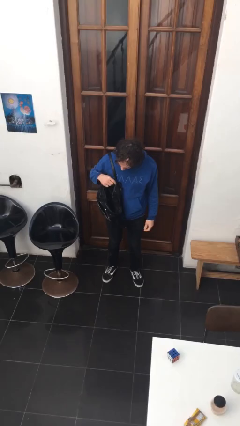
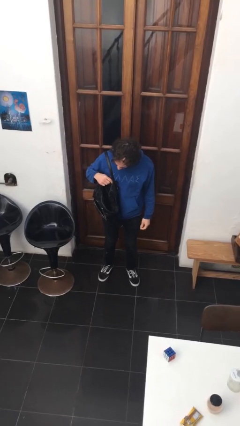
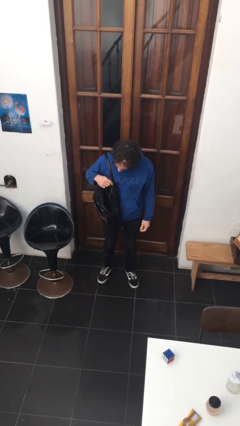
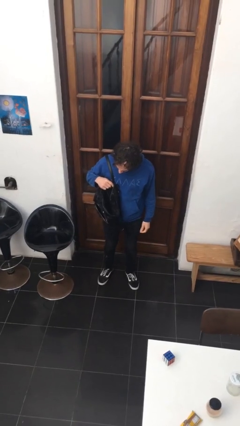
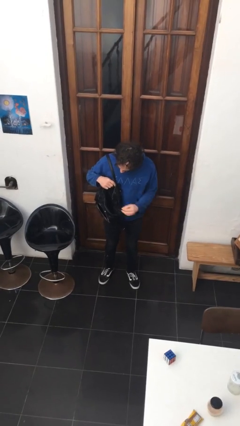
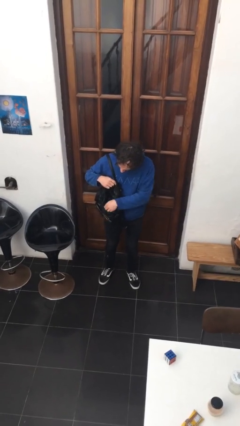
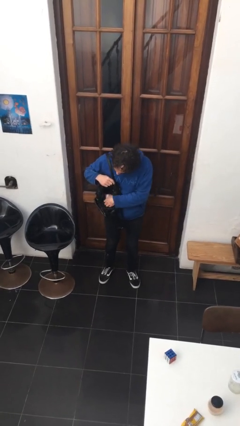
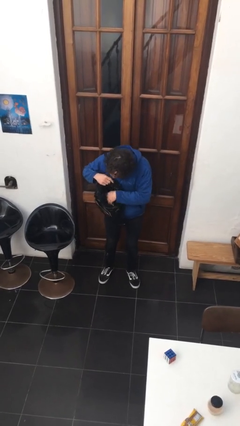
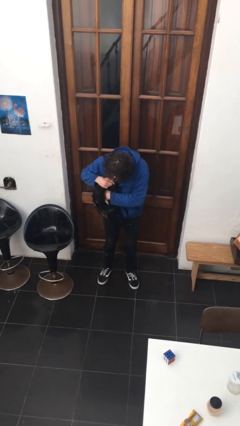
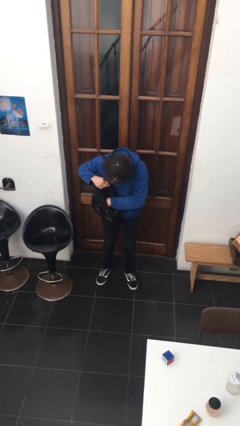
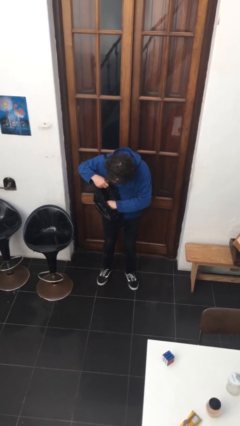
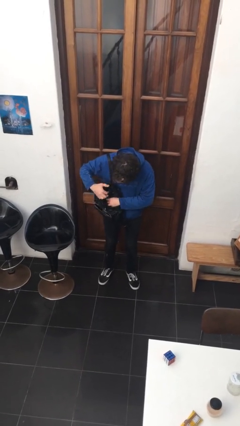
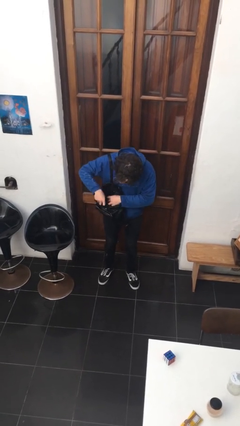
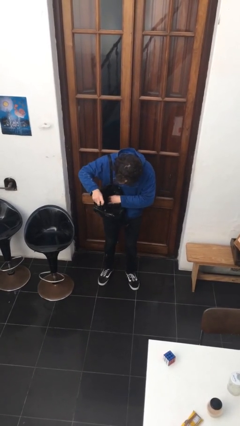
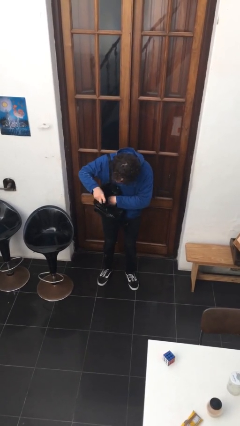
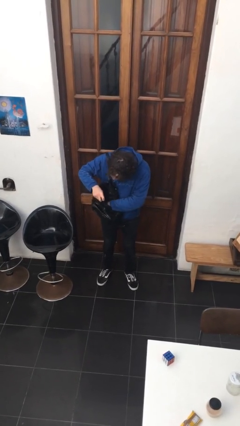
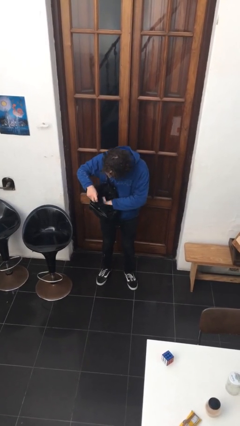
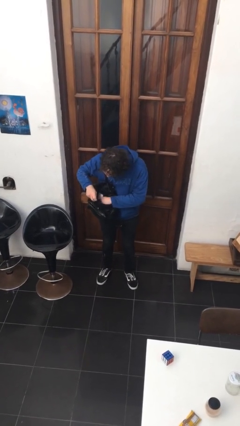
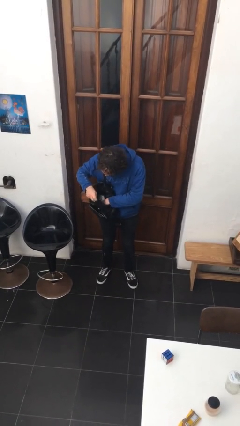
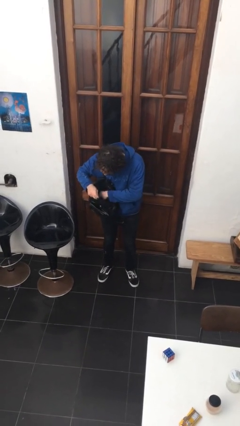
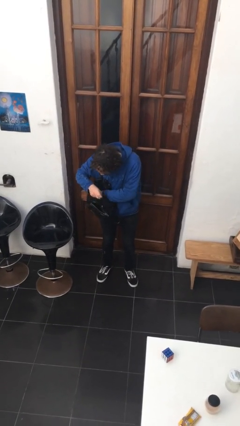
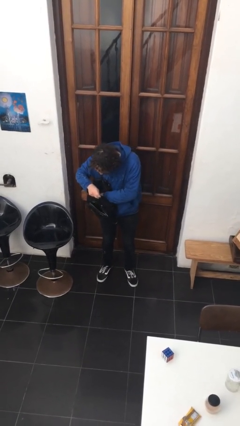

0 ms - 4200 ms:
person searches in purse

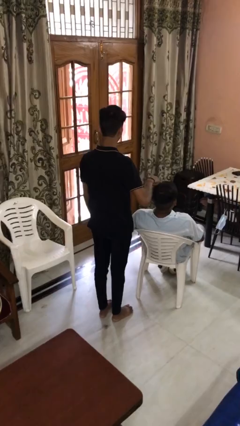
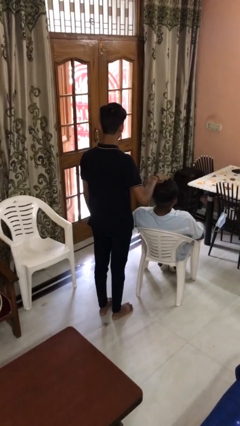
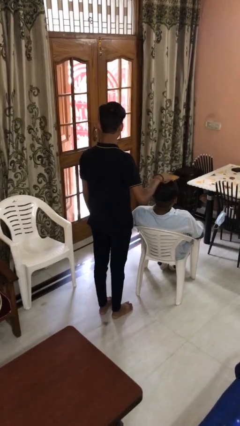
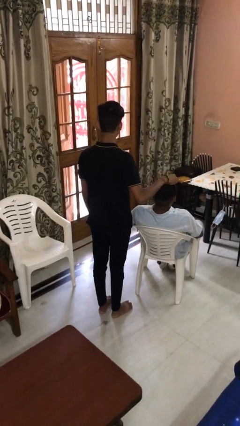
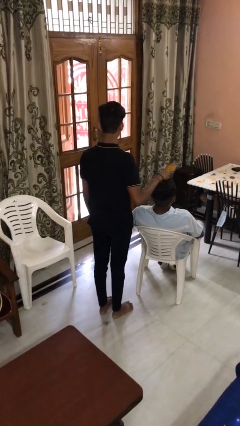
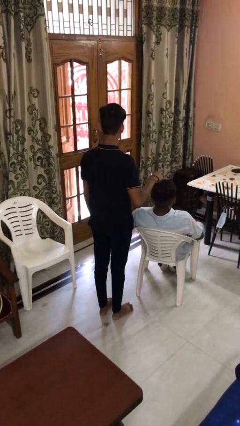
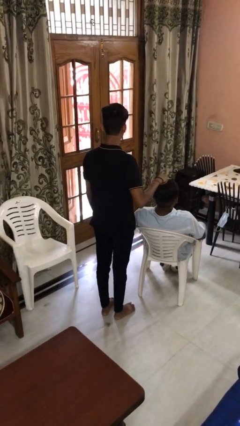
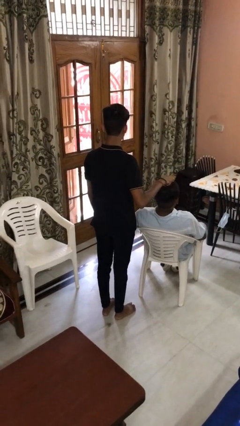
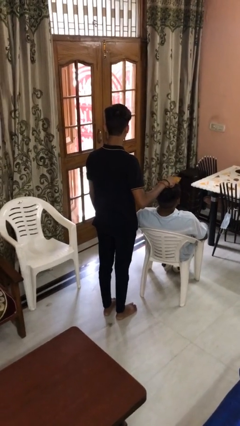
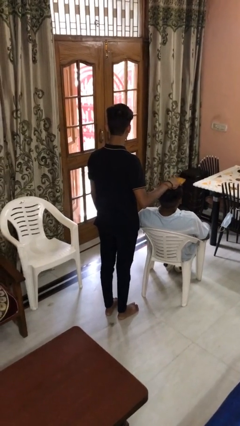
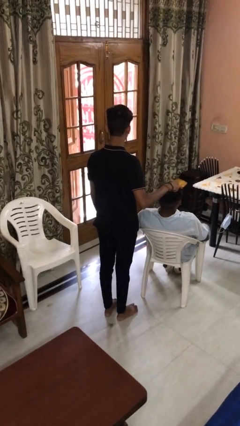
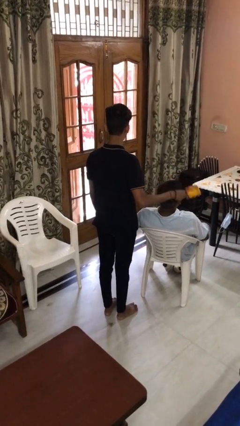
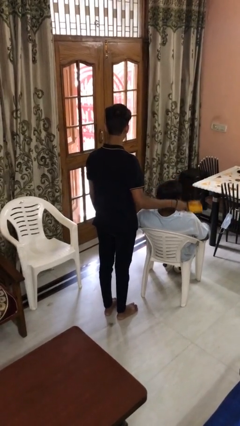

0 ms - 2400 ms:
person brushes hair of person

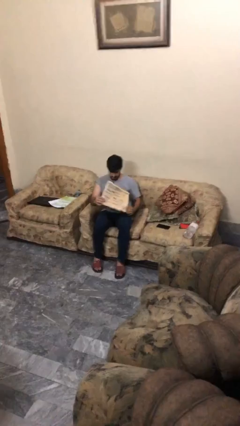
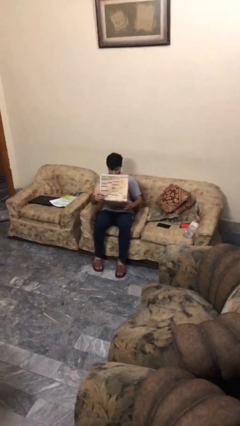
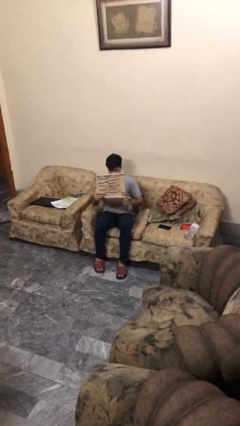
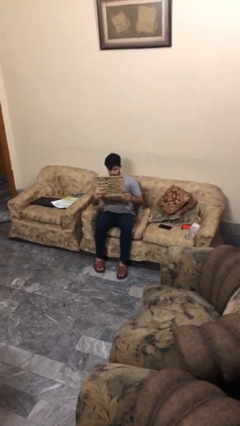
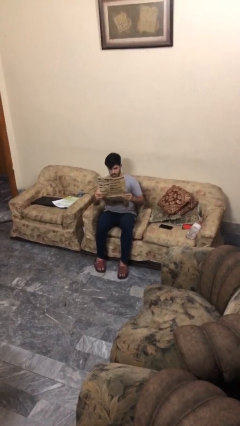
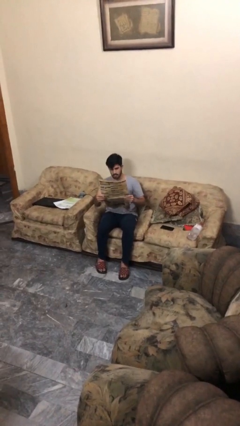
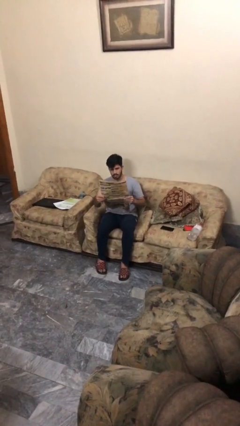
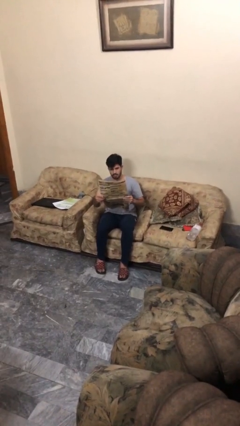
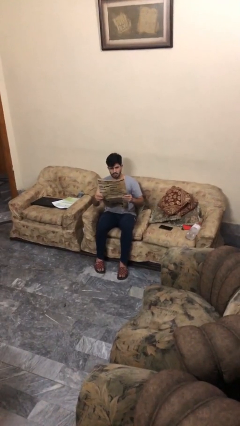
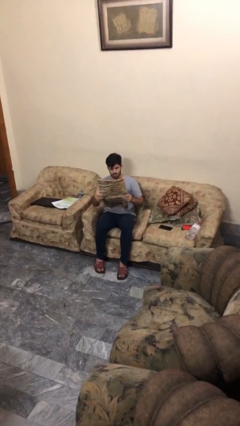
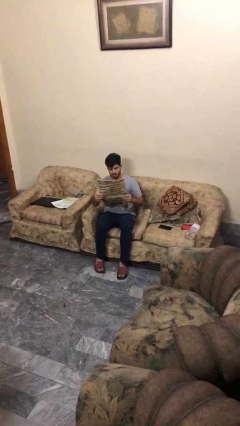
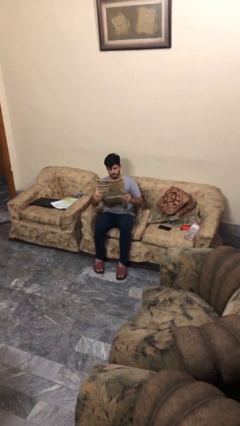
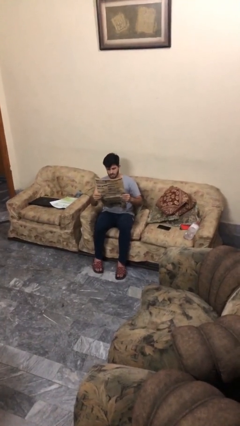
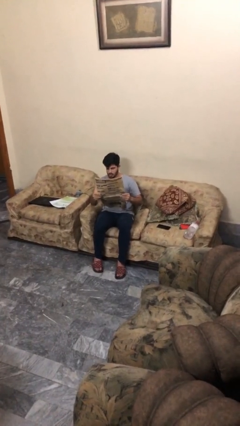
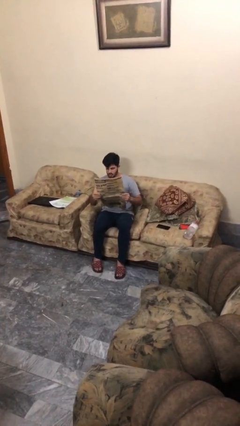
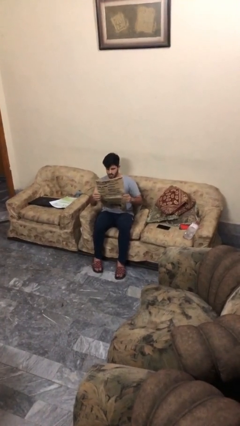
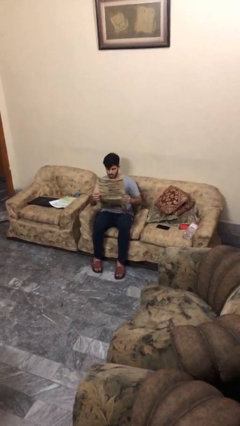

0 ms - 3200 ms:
person reads newspaper

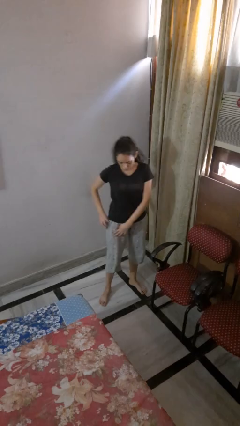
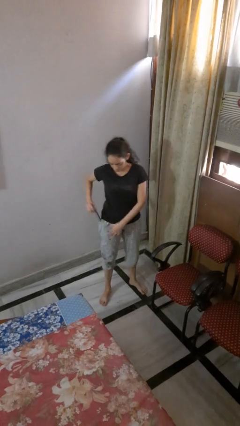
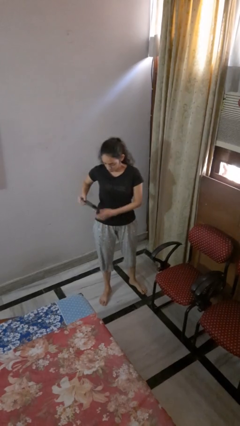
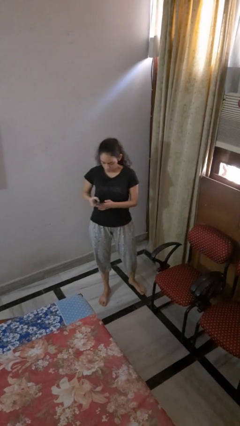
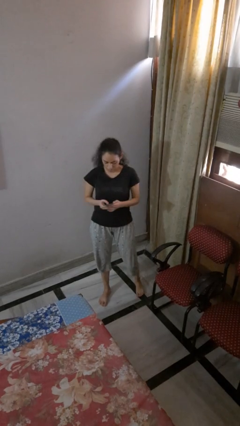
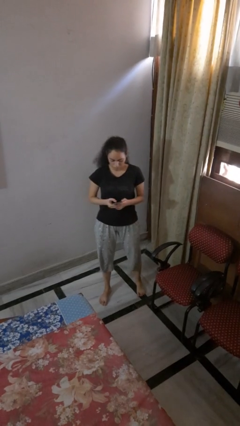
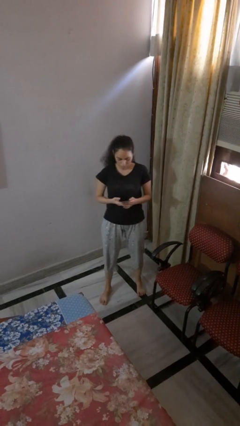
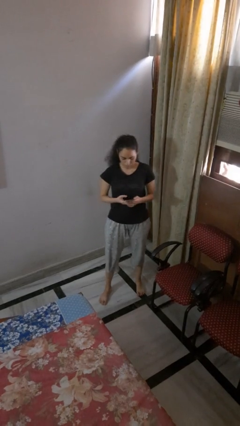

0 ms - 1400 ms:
person takes phone from pocket

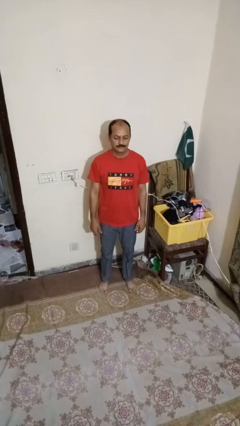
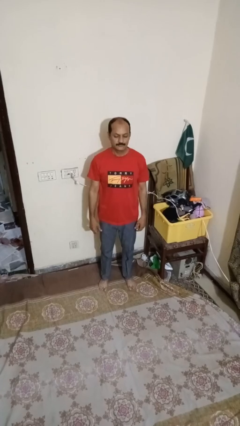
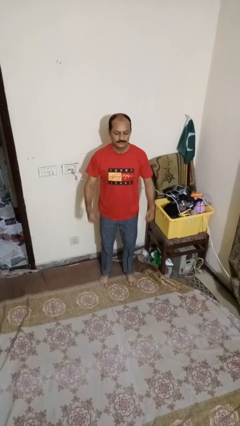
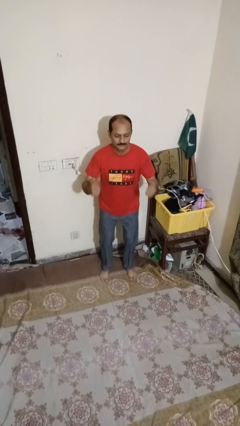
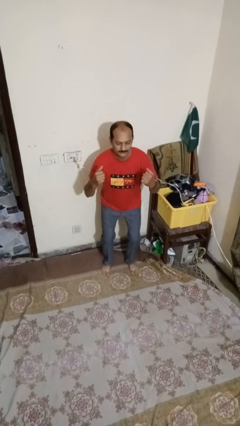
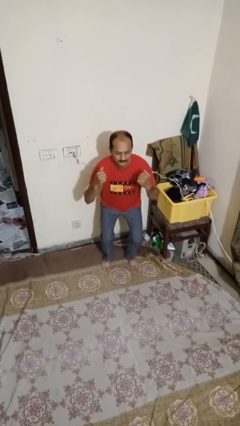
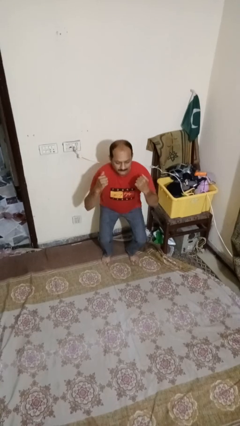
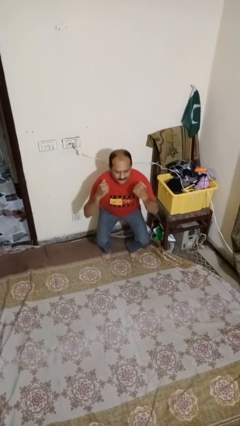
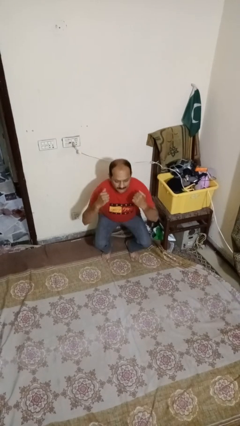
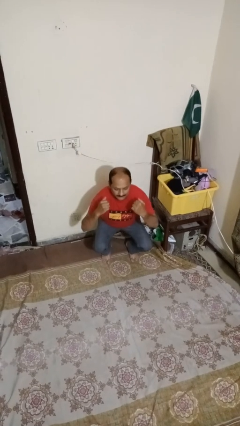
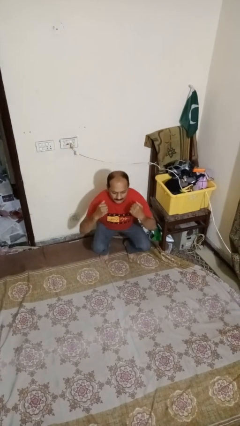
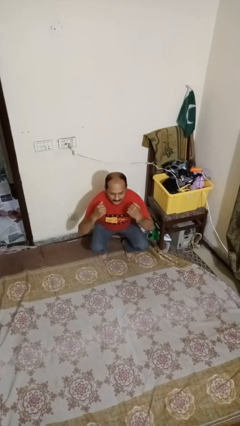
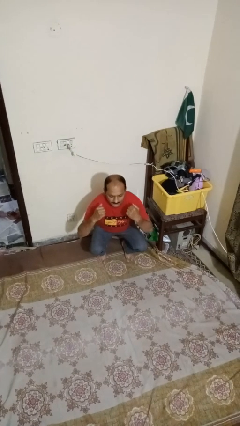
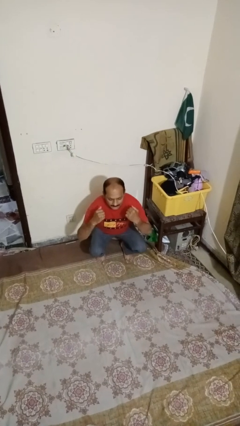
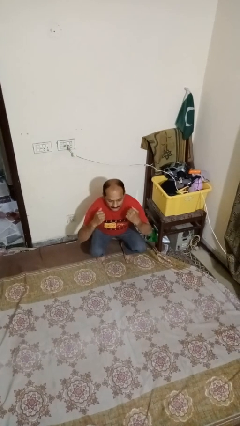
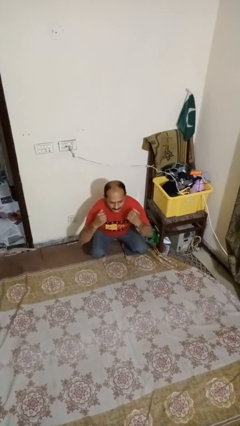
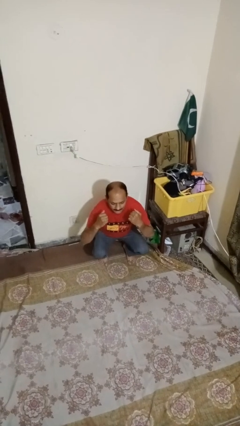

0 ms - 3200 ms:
person squats

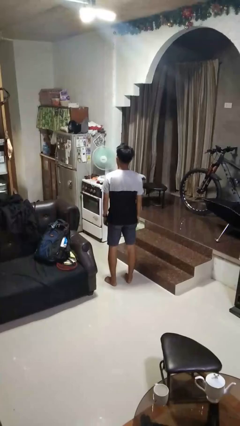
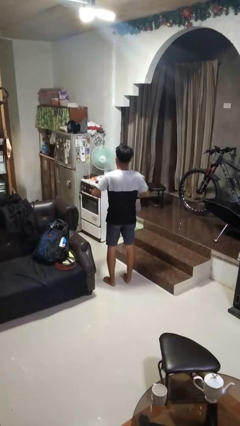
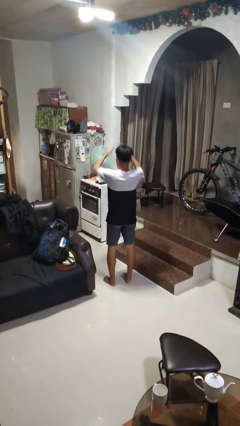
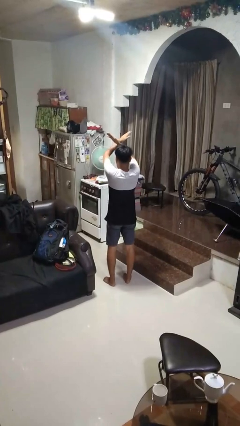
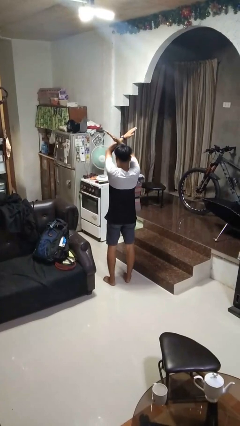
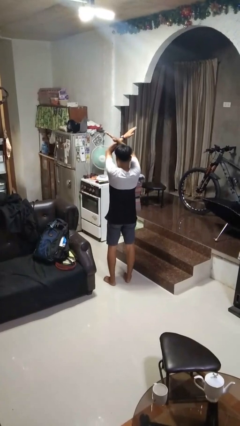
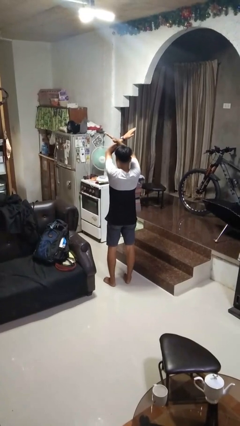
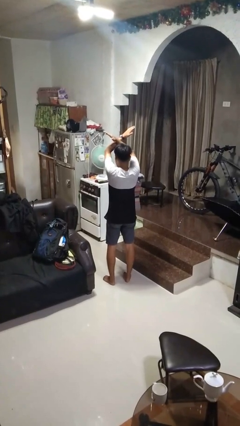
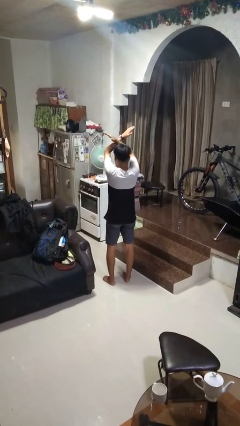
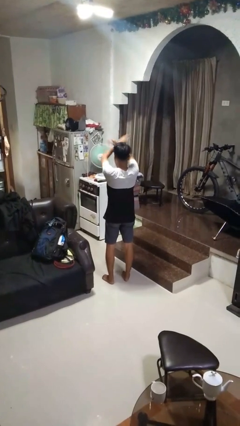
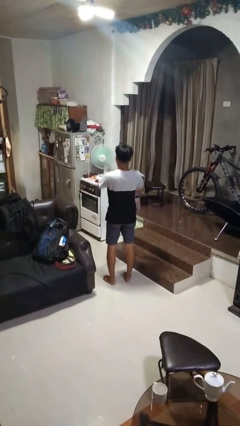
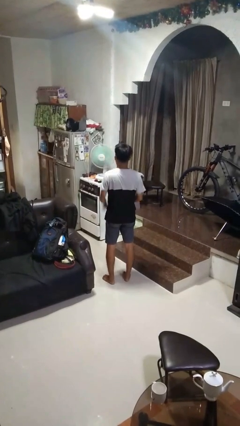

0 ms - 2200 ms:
person gestures arms x

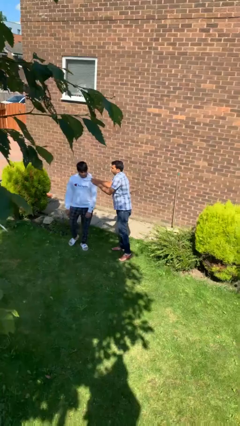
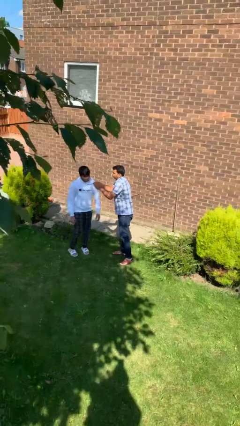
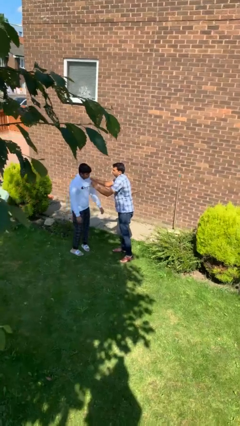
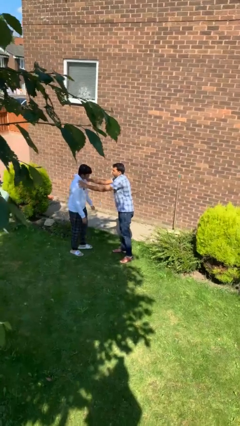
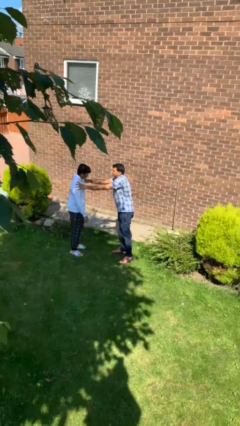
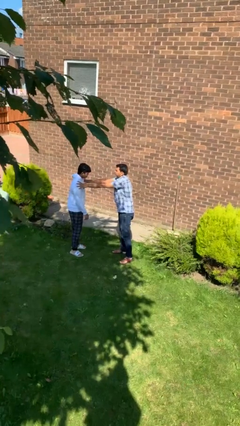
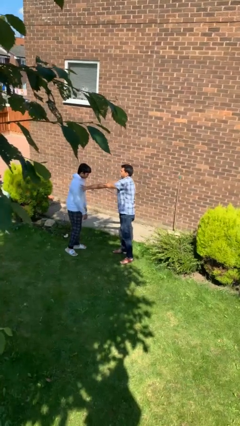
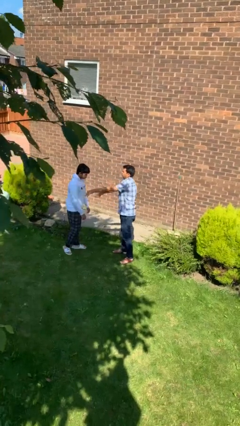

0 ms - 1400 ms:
person spins person around
